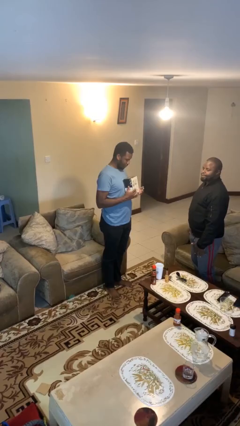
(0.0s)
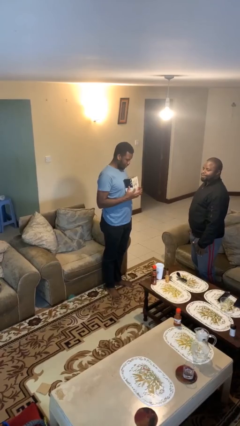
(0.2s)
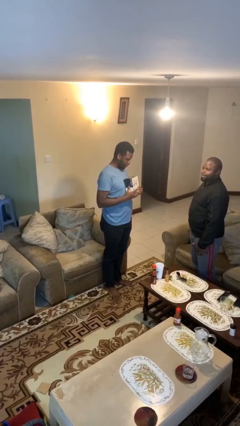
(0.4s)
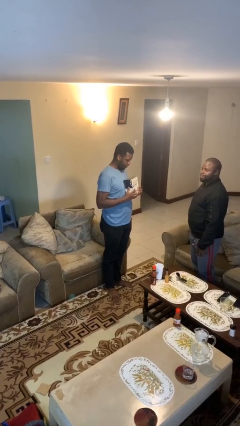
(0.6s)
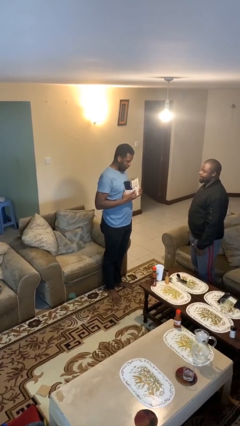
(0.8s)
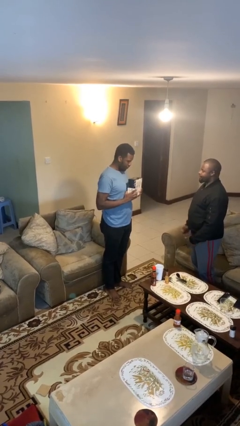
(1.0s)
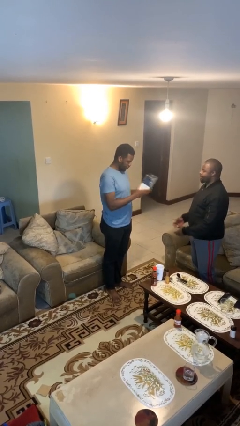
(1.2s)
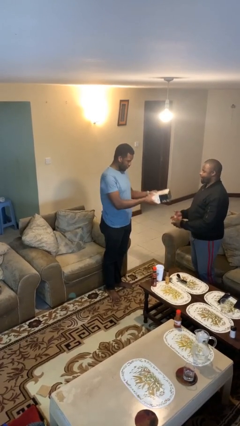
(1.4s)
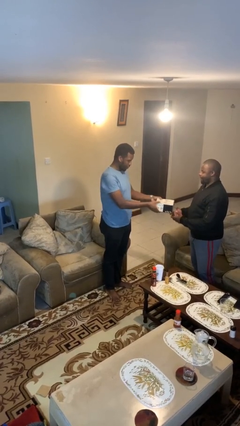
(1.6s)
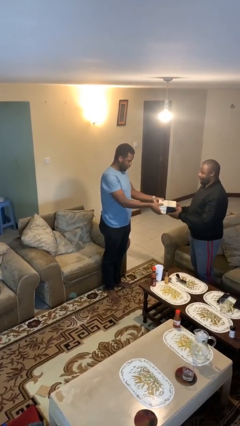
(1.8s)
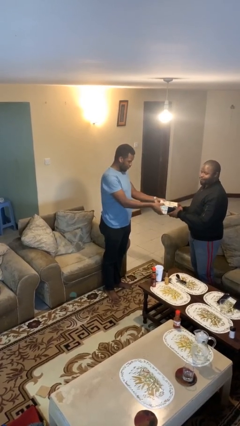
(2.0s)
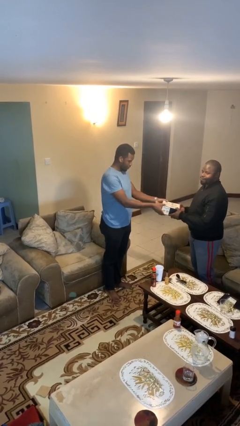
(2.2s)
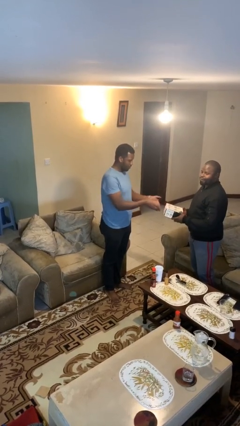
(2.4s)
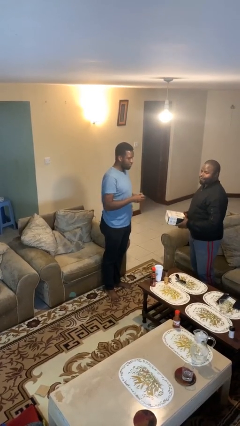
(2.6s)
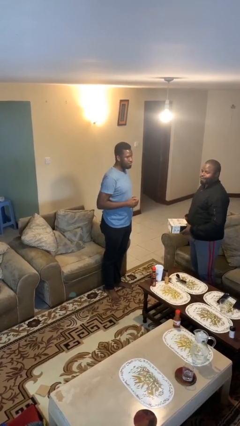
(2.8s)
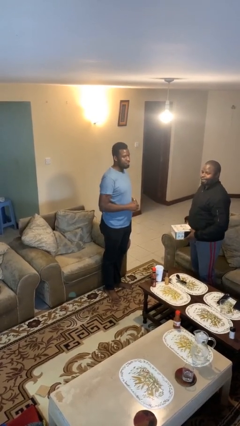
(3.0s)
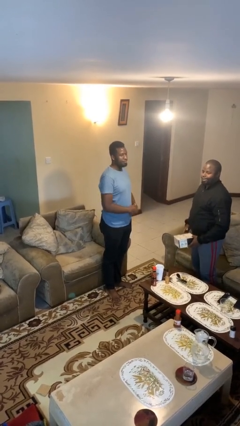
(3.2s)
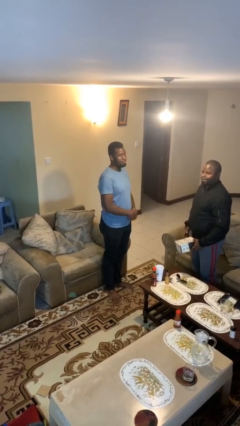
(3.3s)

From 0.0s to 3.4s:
person transfers object to person

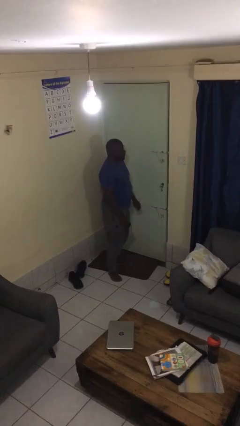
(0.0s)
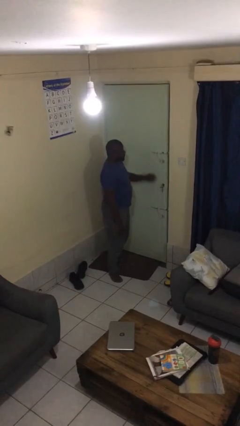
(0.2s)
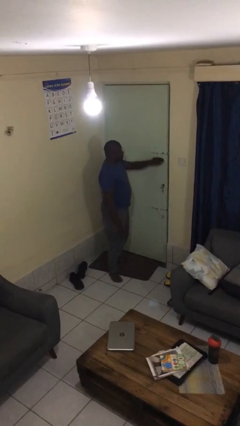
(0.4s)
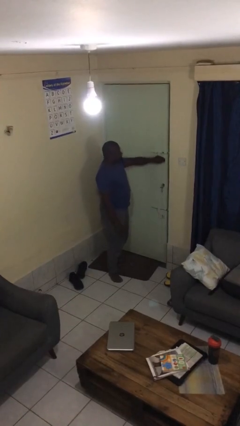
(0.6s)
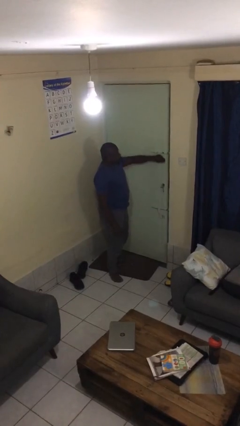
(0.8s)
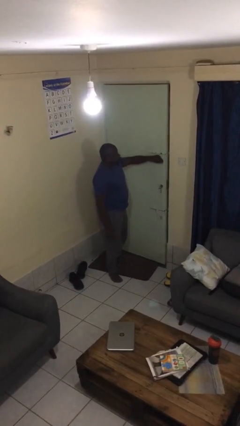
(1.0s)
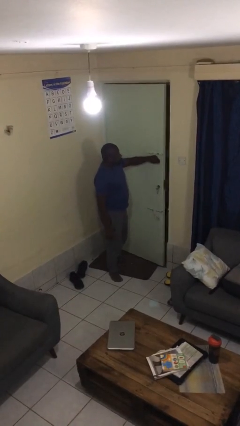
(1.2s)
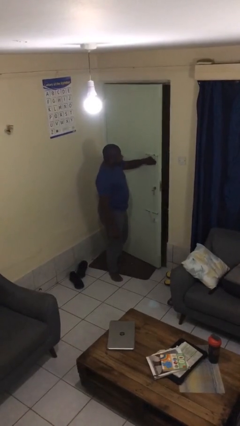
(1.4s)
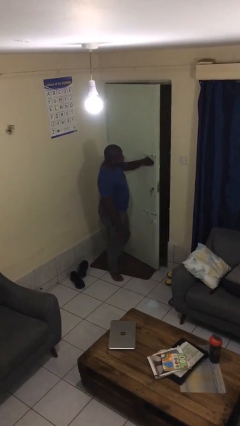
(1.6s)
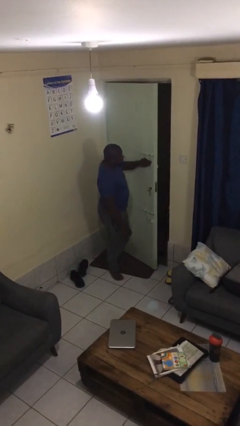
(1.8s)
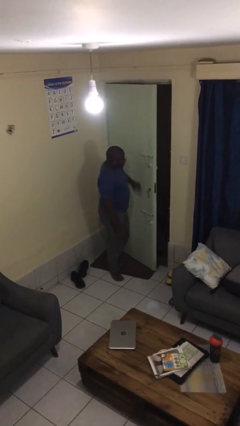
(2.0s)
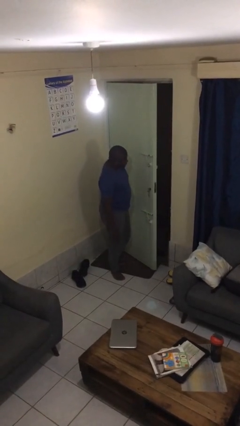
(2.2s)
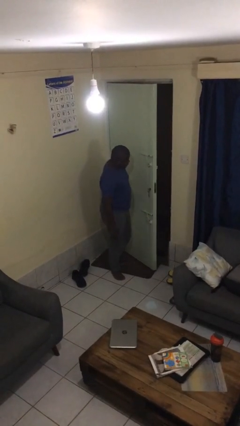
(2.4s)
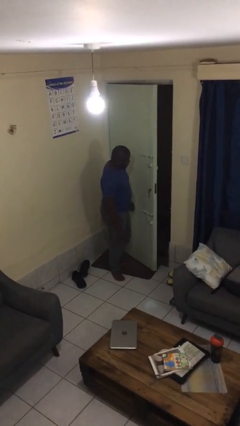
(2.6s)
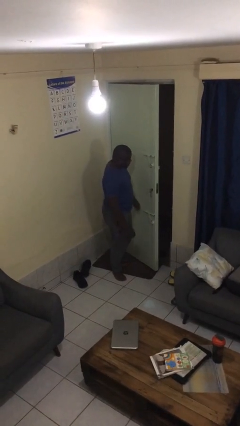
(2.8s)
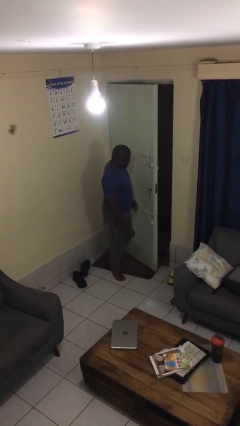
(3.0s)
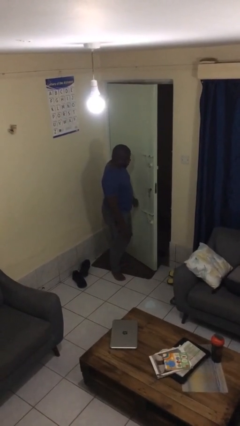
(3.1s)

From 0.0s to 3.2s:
person opens facility door

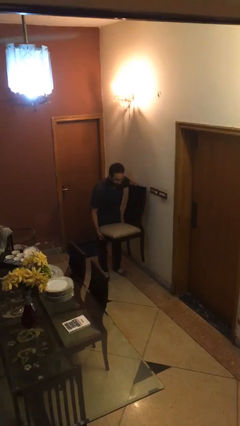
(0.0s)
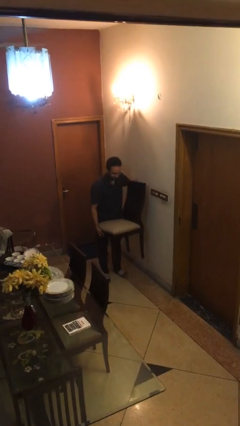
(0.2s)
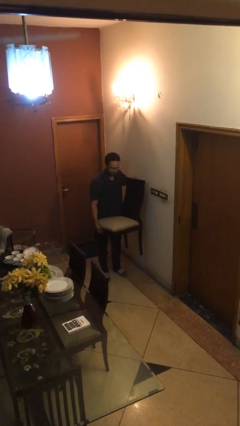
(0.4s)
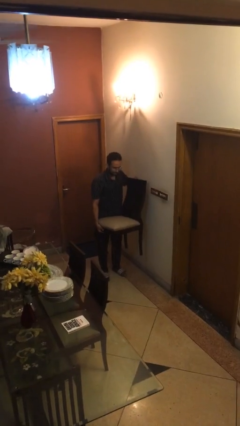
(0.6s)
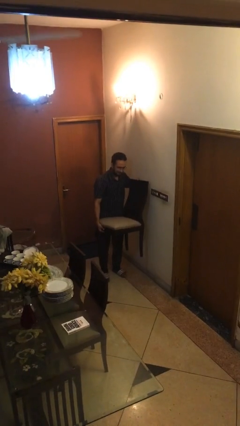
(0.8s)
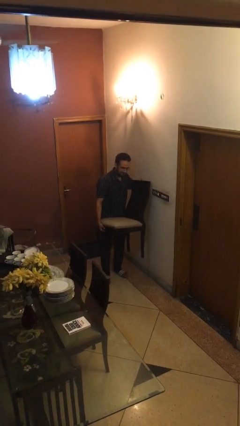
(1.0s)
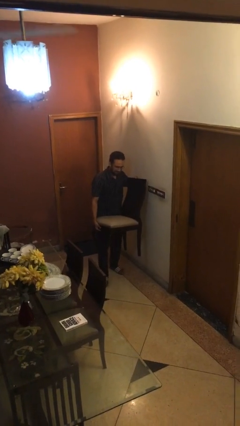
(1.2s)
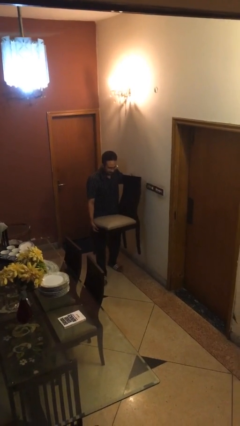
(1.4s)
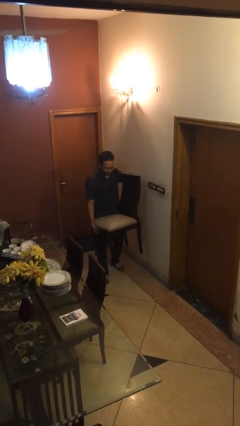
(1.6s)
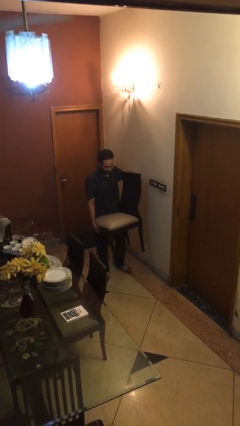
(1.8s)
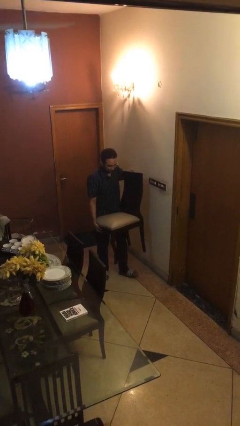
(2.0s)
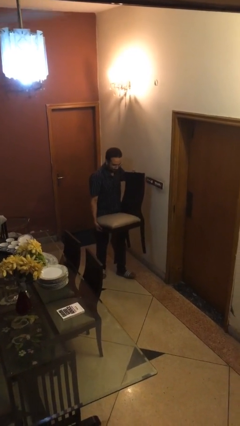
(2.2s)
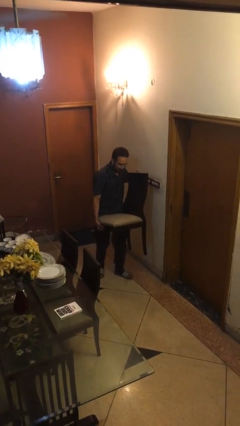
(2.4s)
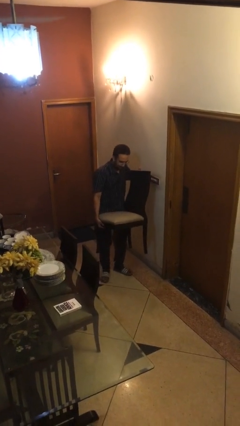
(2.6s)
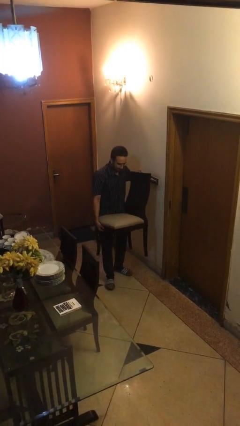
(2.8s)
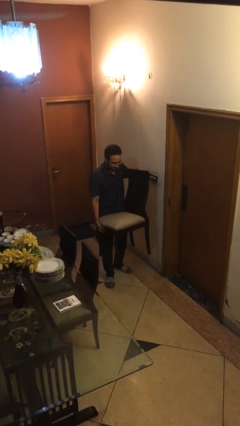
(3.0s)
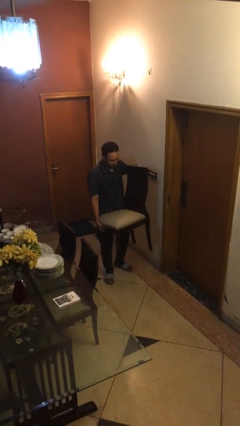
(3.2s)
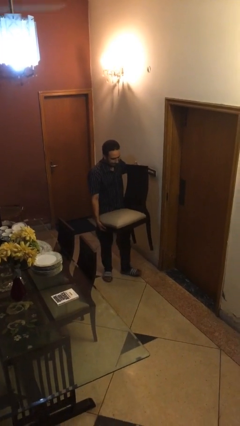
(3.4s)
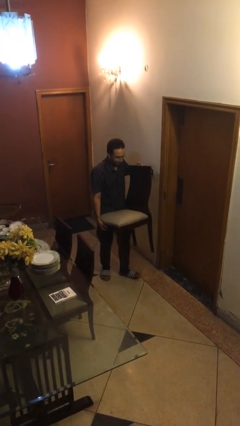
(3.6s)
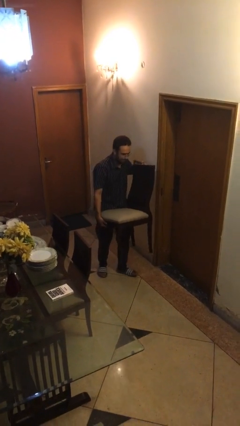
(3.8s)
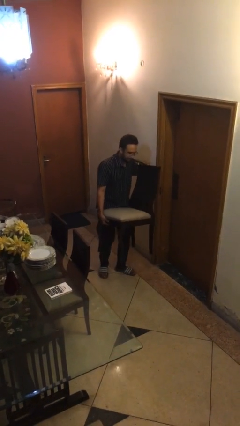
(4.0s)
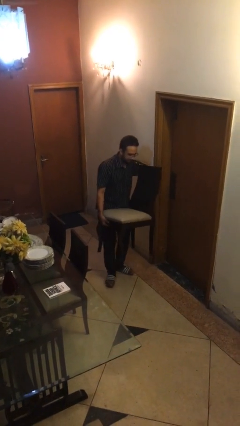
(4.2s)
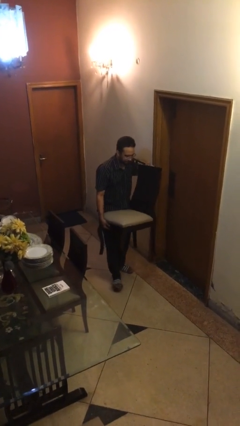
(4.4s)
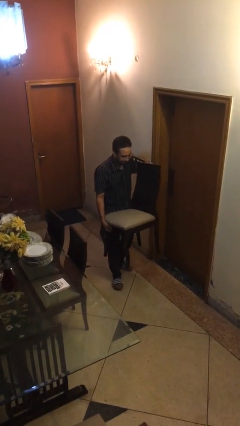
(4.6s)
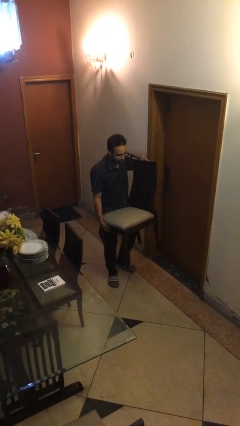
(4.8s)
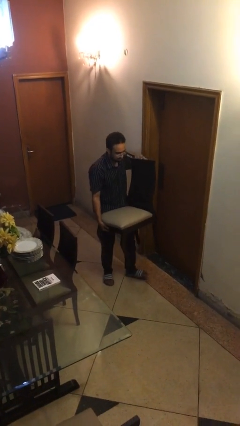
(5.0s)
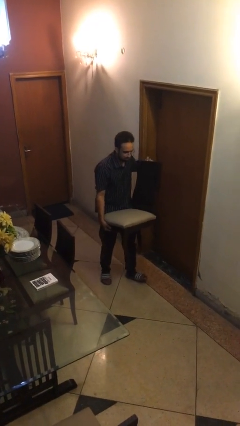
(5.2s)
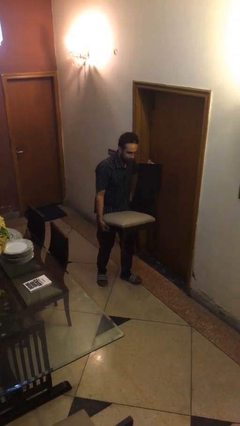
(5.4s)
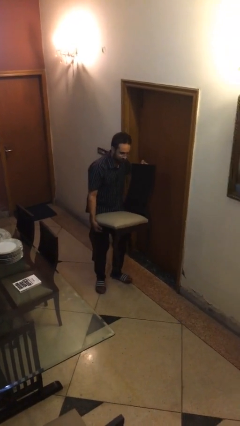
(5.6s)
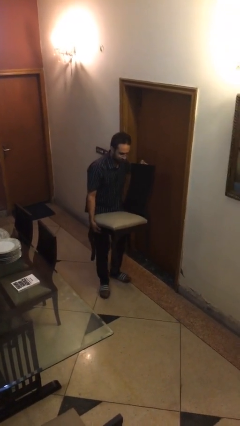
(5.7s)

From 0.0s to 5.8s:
person carries heavy object

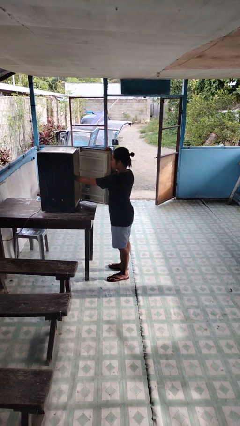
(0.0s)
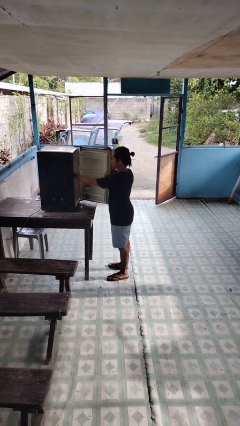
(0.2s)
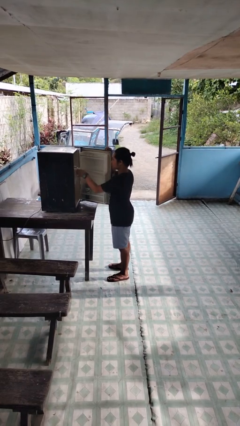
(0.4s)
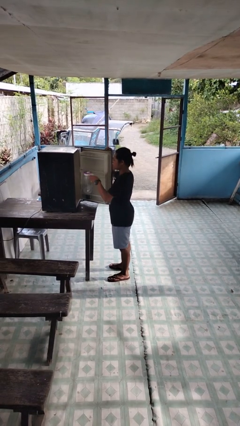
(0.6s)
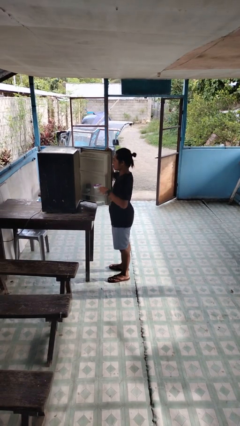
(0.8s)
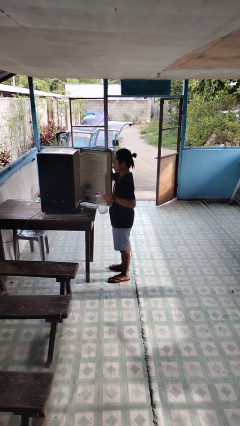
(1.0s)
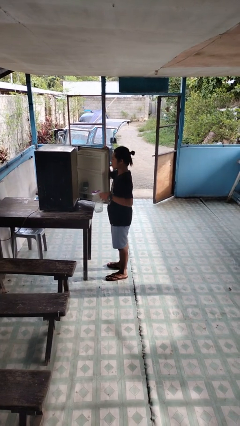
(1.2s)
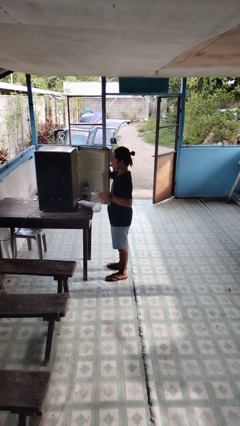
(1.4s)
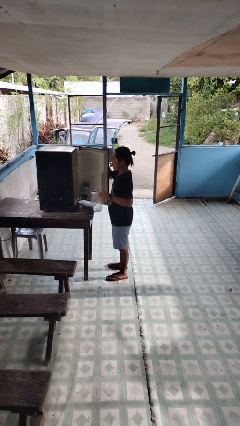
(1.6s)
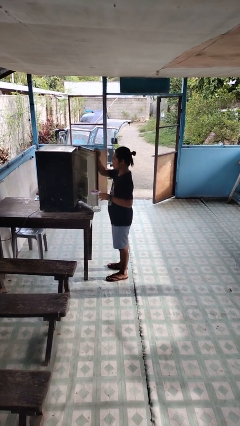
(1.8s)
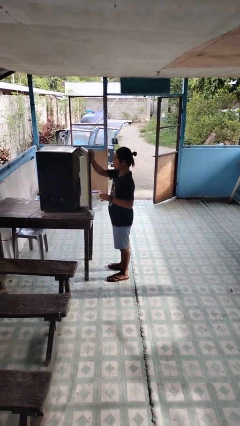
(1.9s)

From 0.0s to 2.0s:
person takes object from refrigerator

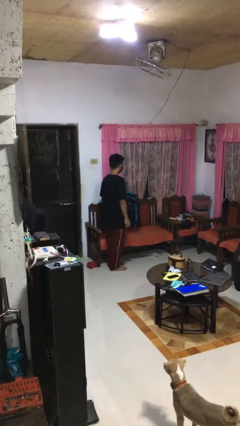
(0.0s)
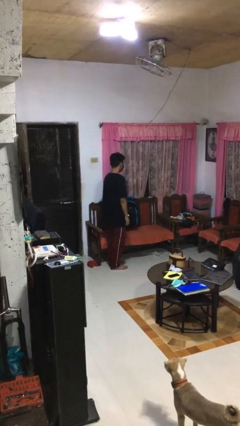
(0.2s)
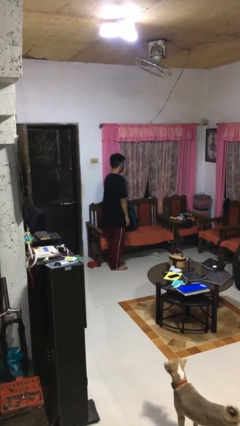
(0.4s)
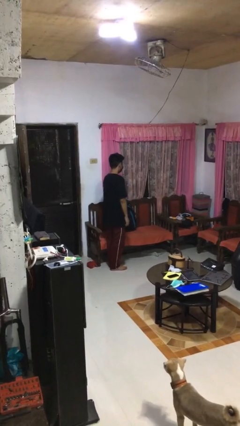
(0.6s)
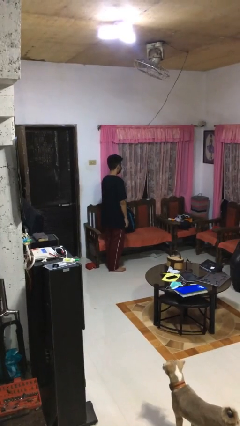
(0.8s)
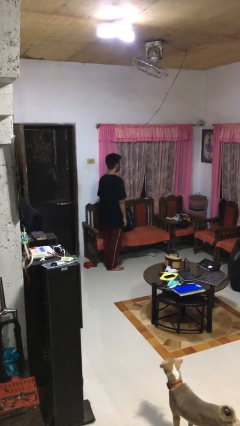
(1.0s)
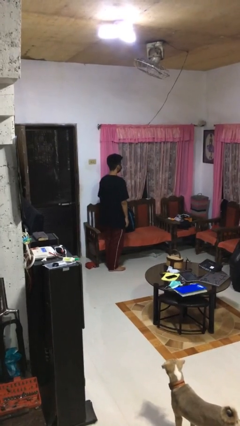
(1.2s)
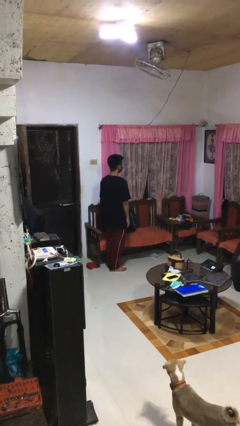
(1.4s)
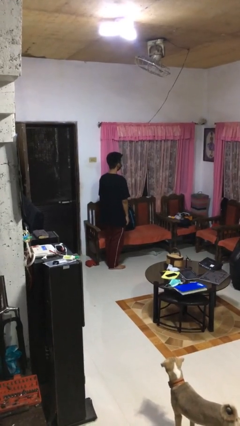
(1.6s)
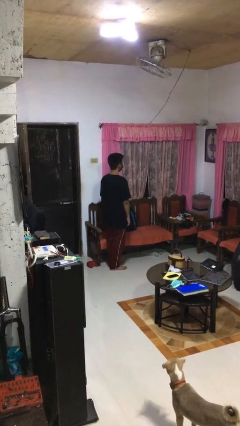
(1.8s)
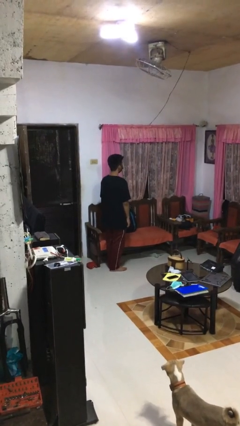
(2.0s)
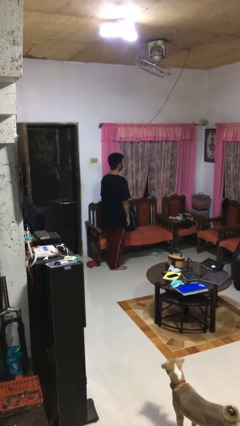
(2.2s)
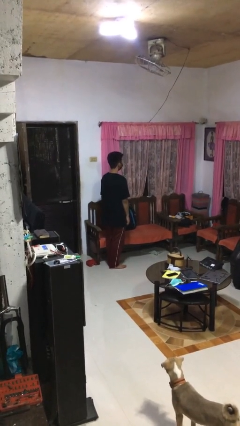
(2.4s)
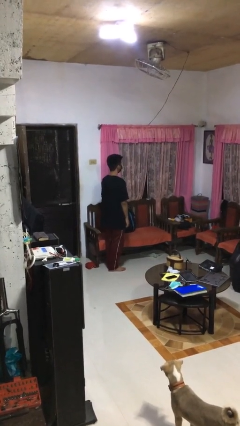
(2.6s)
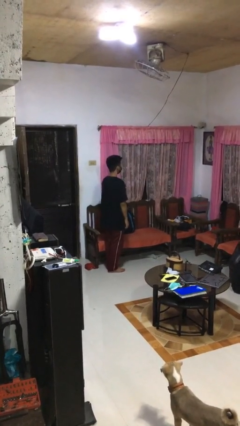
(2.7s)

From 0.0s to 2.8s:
person puts down object on couch

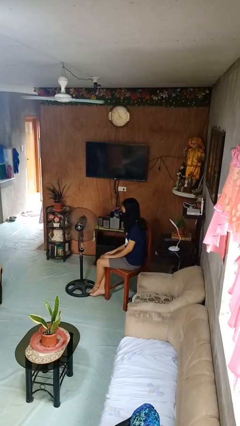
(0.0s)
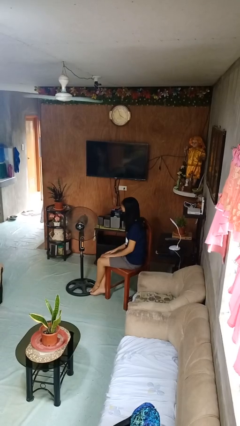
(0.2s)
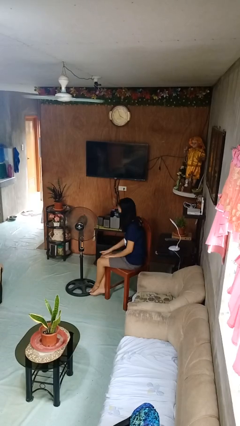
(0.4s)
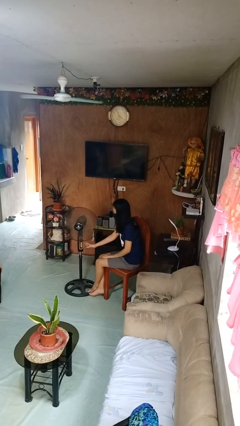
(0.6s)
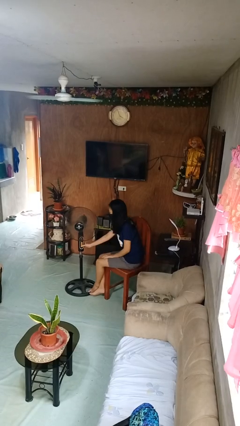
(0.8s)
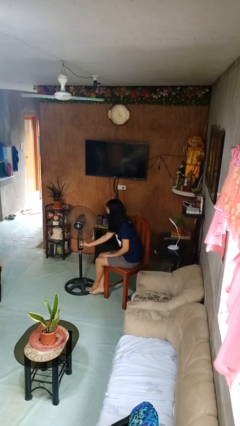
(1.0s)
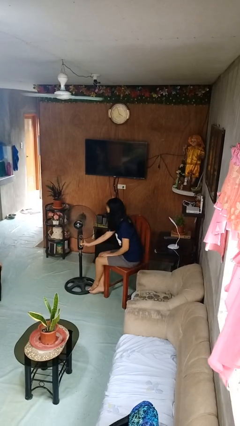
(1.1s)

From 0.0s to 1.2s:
person turns on fan
